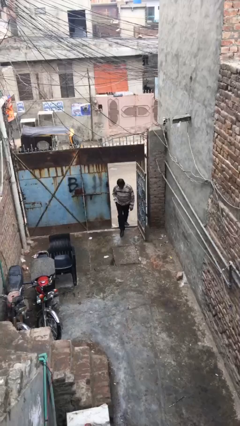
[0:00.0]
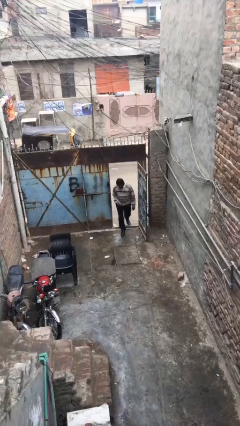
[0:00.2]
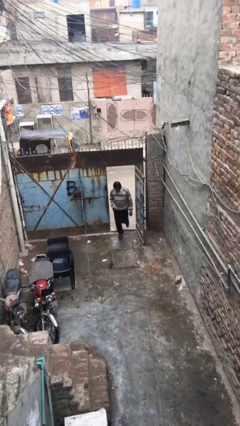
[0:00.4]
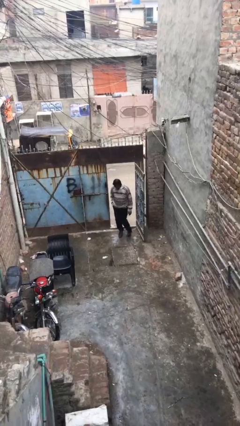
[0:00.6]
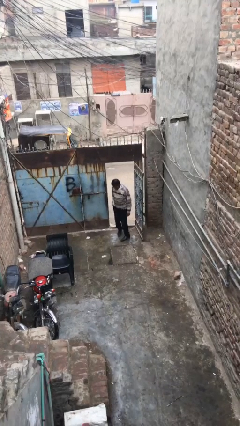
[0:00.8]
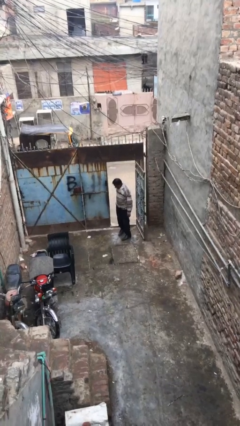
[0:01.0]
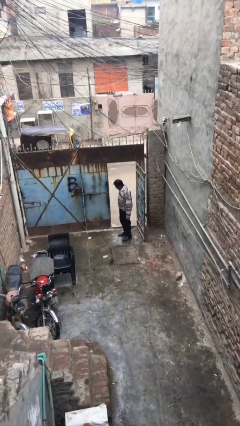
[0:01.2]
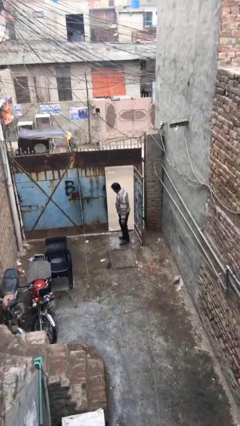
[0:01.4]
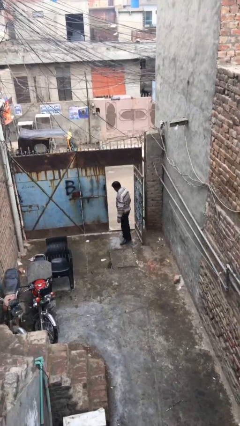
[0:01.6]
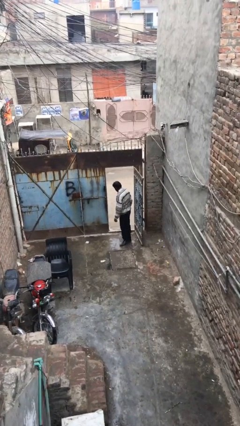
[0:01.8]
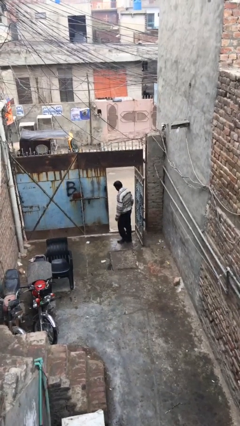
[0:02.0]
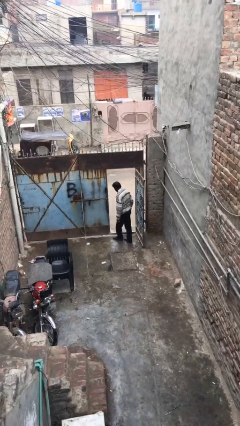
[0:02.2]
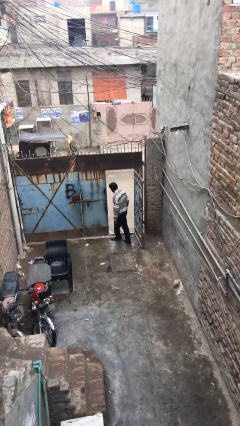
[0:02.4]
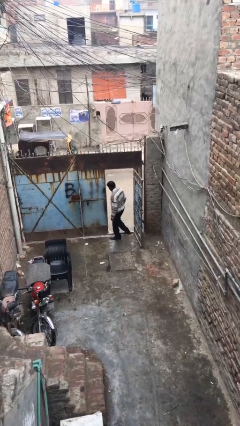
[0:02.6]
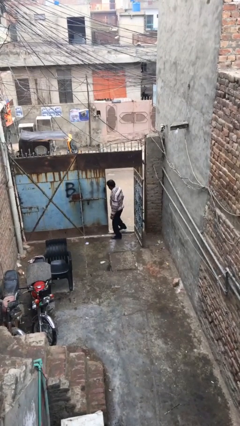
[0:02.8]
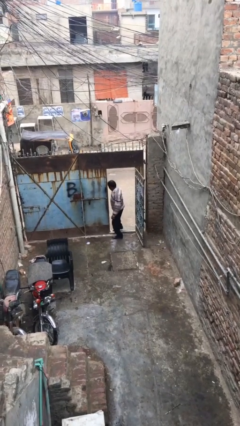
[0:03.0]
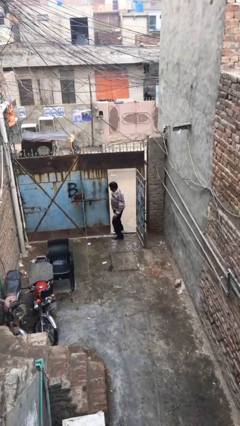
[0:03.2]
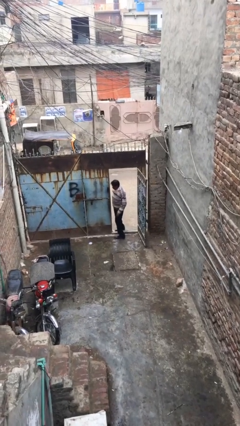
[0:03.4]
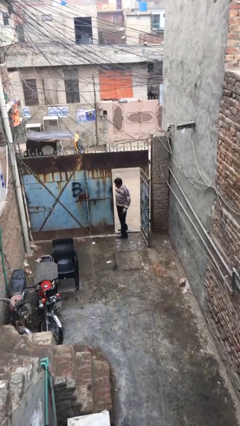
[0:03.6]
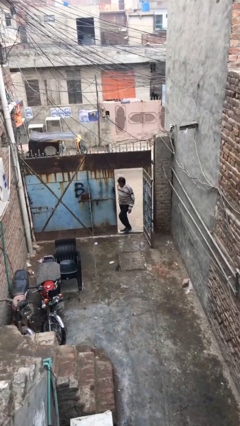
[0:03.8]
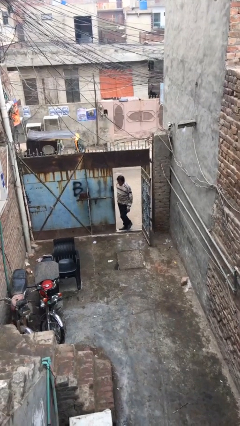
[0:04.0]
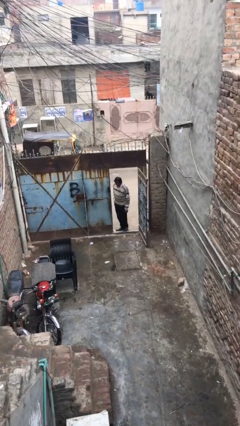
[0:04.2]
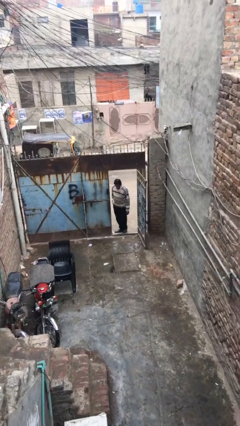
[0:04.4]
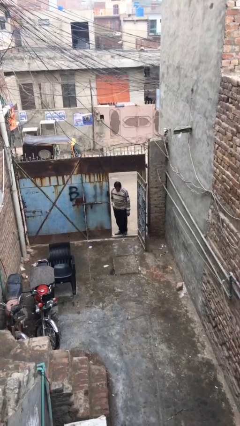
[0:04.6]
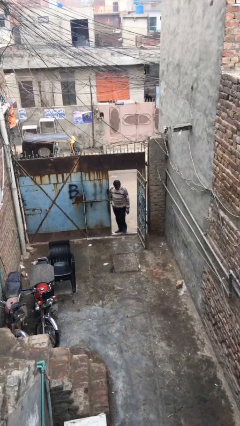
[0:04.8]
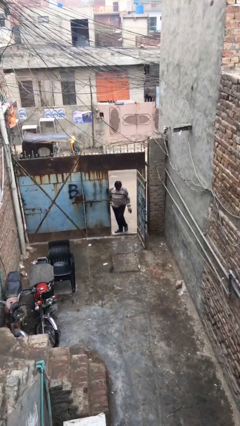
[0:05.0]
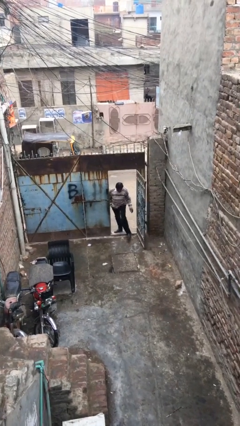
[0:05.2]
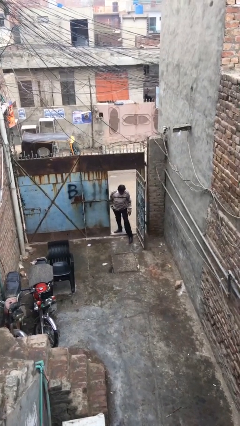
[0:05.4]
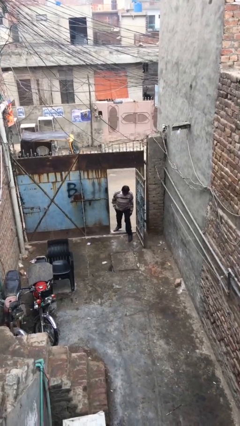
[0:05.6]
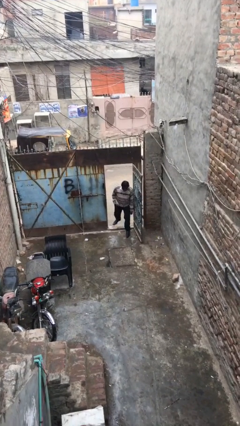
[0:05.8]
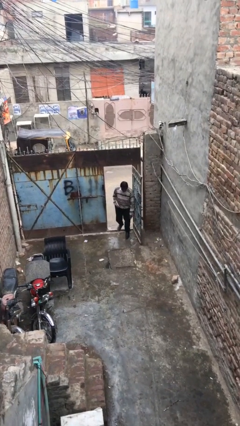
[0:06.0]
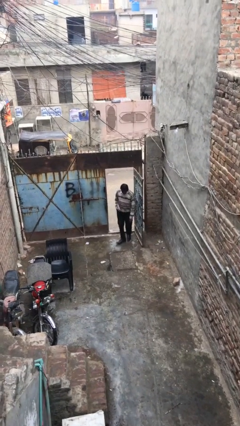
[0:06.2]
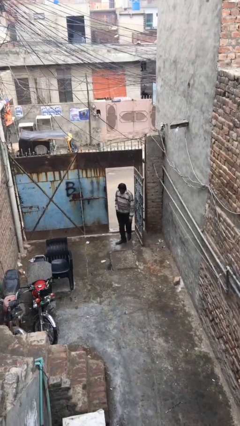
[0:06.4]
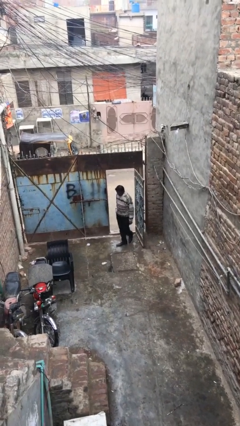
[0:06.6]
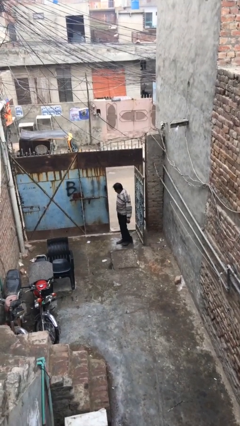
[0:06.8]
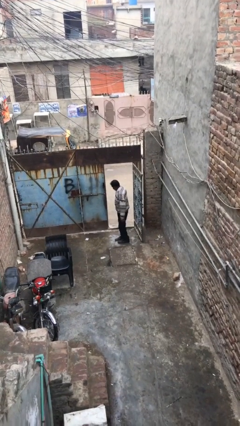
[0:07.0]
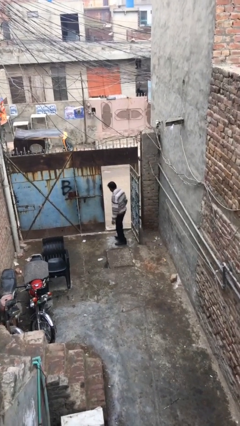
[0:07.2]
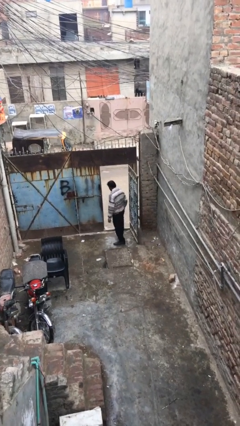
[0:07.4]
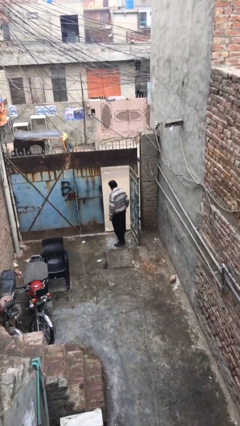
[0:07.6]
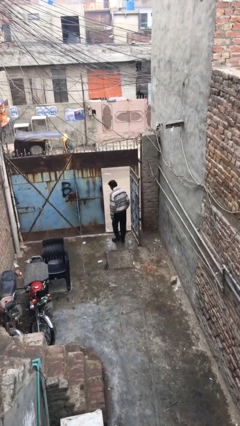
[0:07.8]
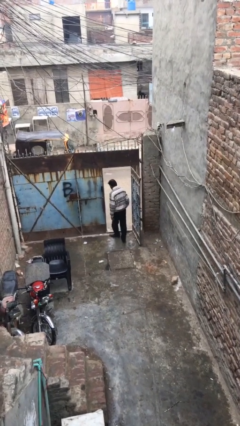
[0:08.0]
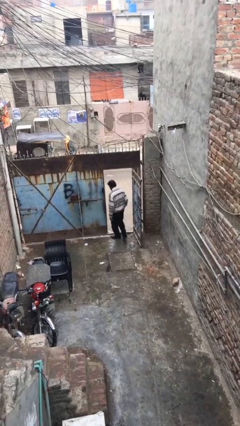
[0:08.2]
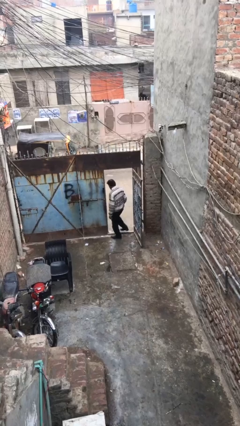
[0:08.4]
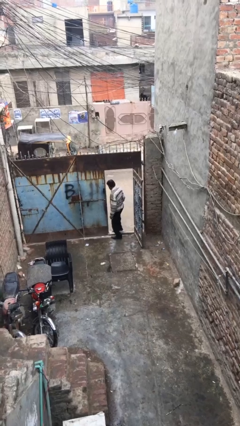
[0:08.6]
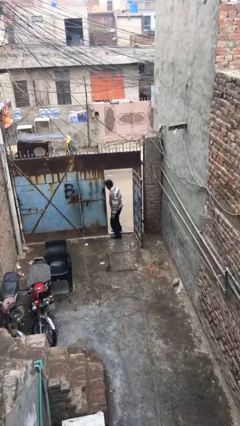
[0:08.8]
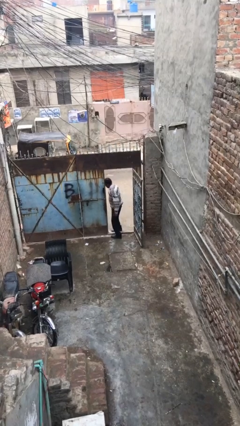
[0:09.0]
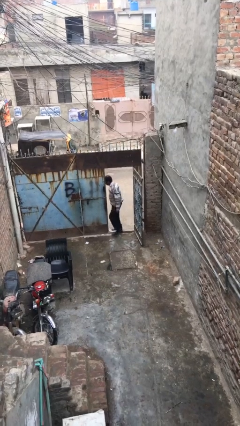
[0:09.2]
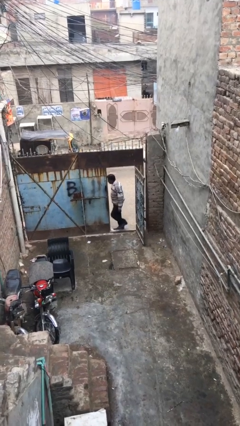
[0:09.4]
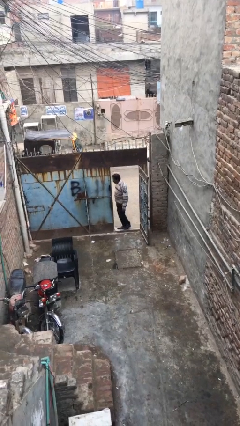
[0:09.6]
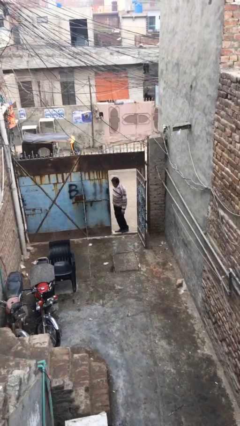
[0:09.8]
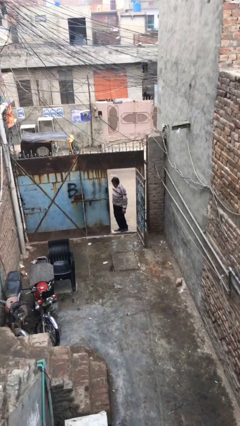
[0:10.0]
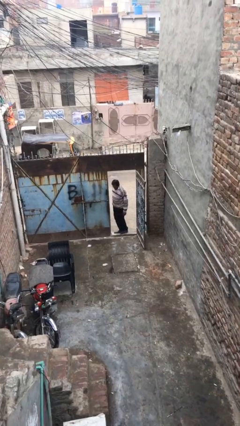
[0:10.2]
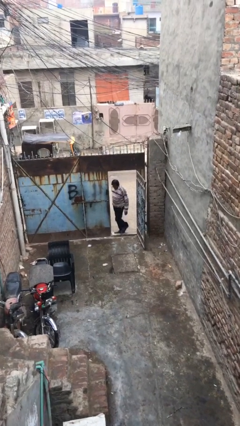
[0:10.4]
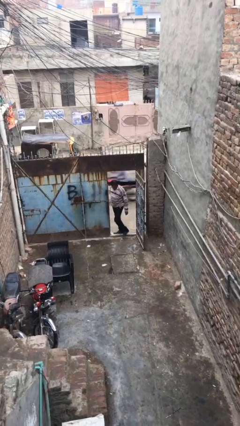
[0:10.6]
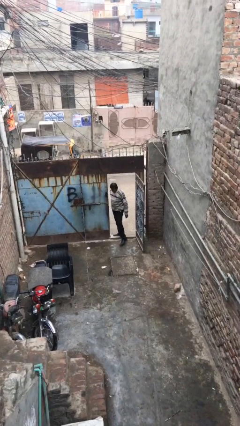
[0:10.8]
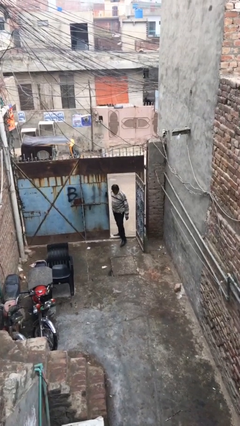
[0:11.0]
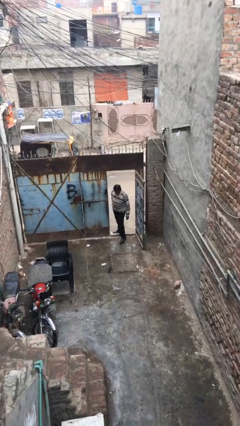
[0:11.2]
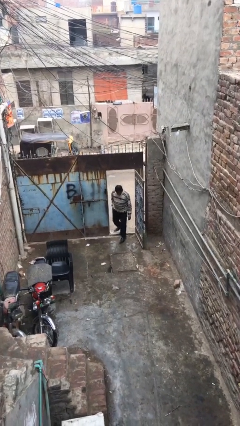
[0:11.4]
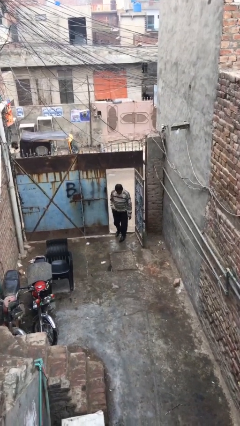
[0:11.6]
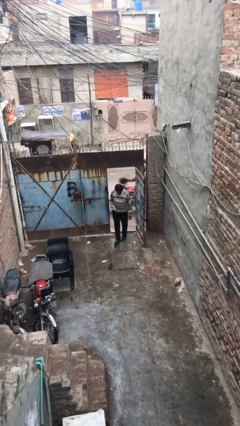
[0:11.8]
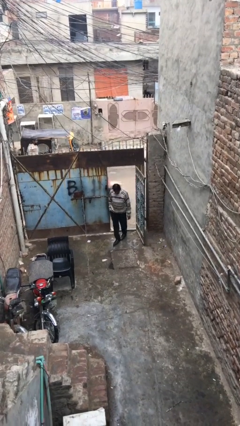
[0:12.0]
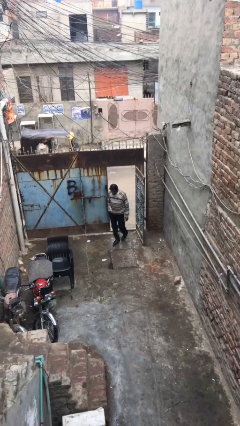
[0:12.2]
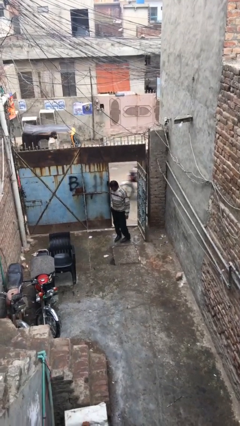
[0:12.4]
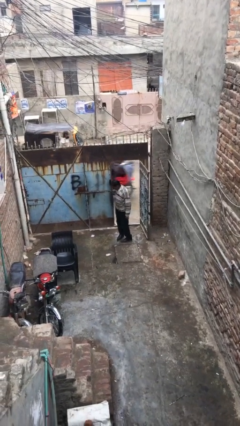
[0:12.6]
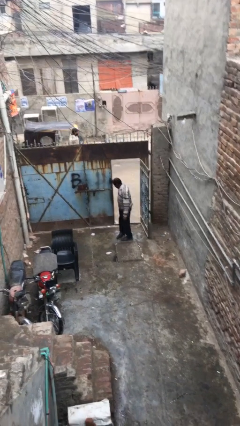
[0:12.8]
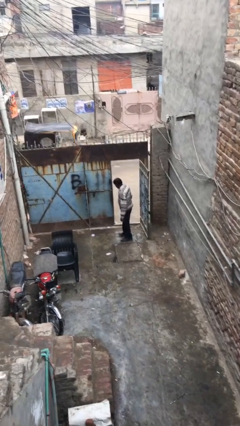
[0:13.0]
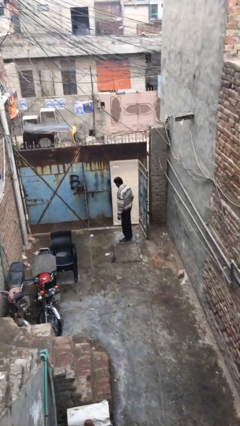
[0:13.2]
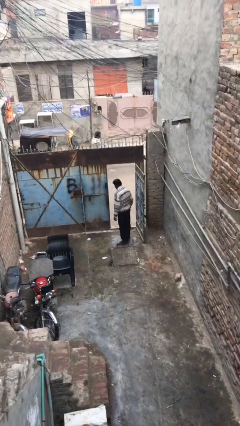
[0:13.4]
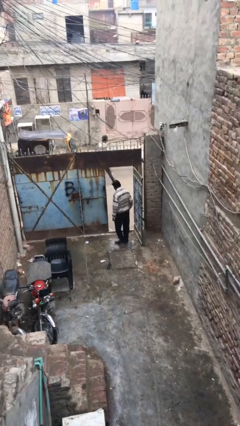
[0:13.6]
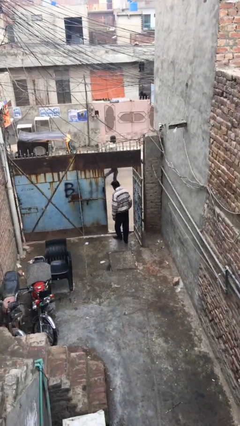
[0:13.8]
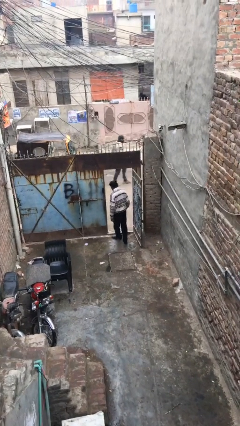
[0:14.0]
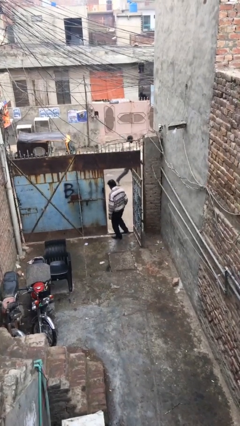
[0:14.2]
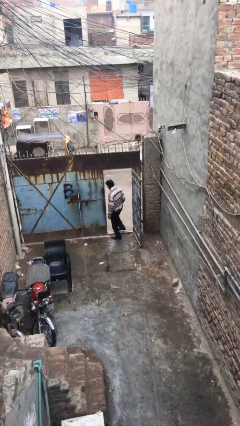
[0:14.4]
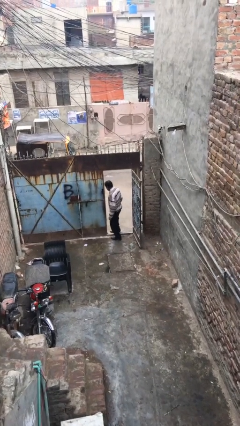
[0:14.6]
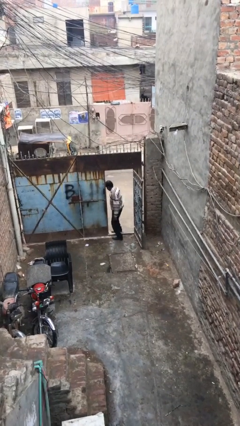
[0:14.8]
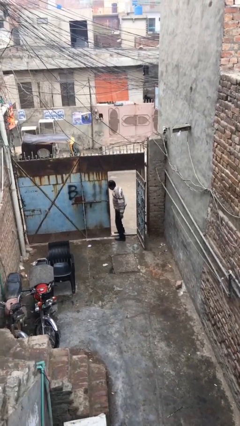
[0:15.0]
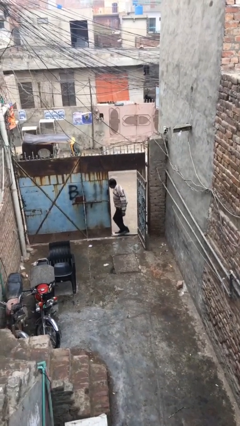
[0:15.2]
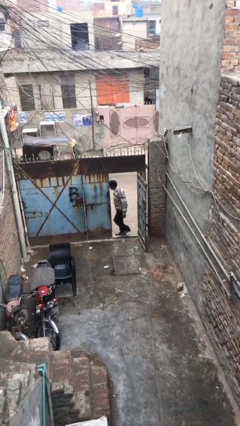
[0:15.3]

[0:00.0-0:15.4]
person texts on phone

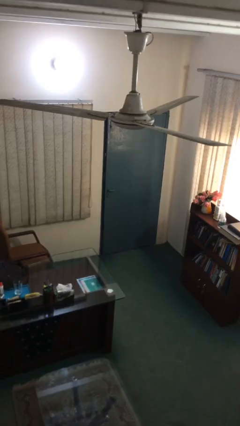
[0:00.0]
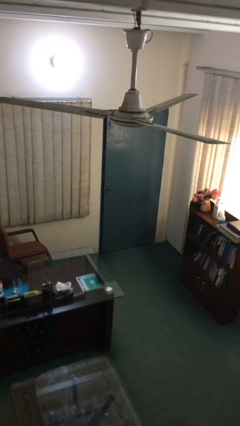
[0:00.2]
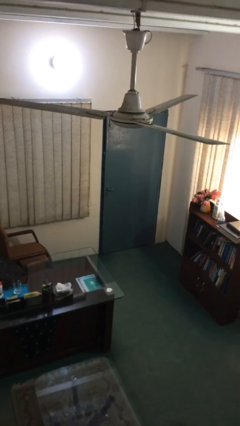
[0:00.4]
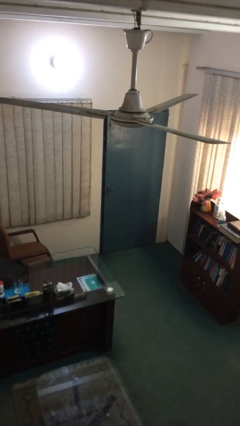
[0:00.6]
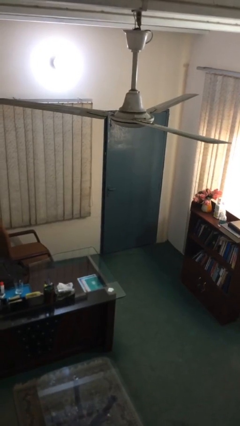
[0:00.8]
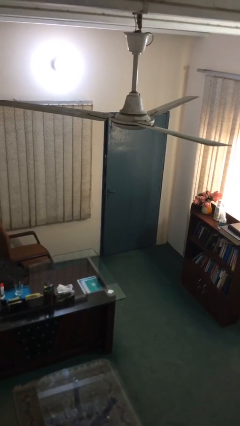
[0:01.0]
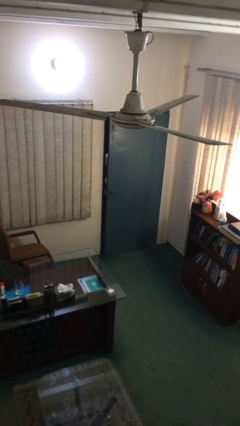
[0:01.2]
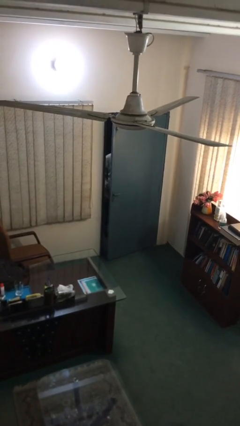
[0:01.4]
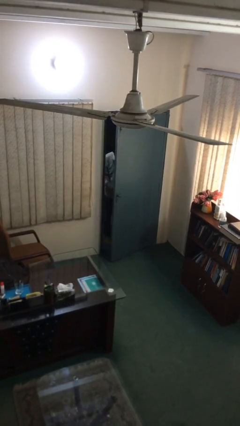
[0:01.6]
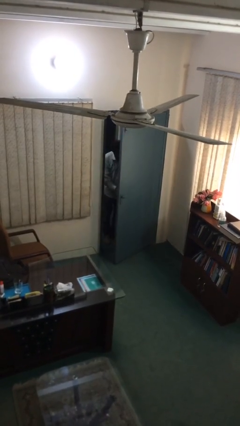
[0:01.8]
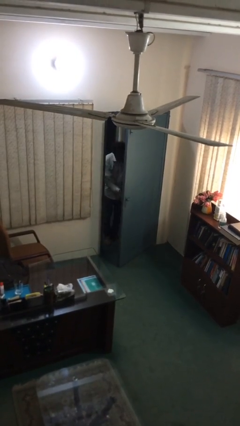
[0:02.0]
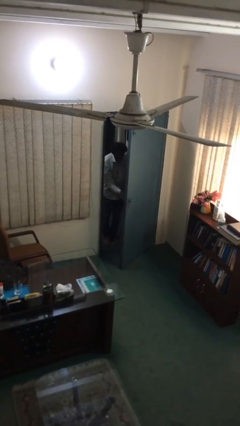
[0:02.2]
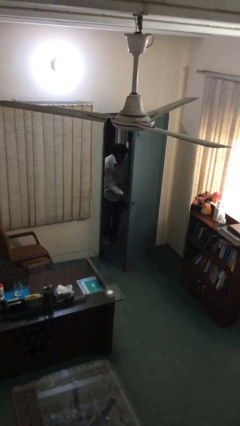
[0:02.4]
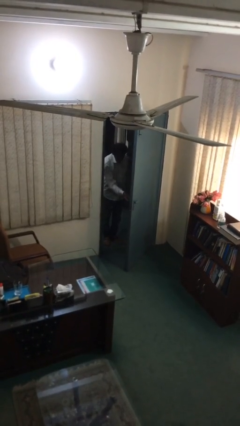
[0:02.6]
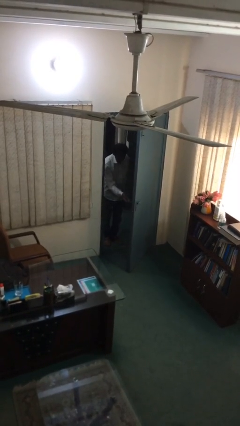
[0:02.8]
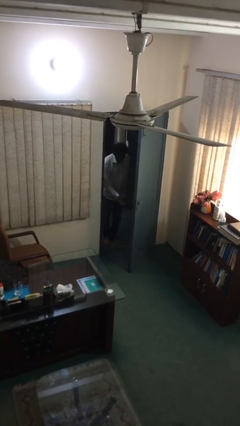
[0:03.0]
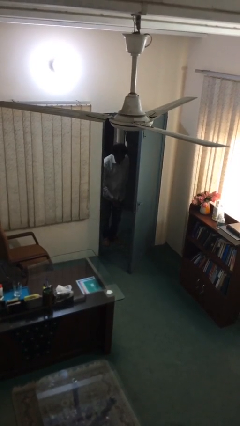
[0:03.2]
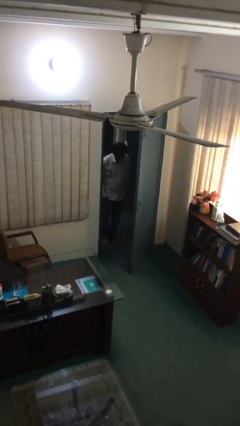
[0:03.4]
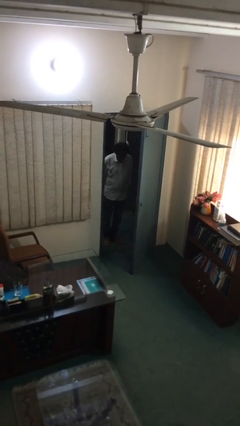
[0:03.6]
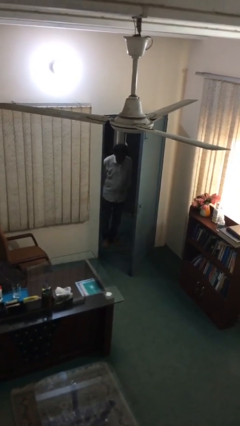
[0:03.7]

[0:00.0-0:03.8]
person opens facility door
